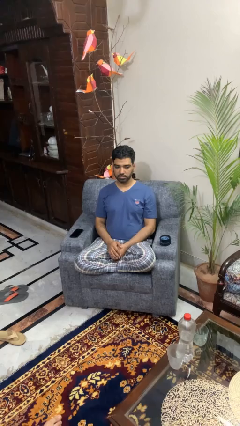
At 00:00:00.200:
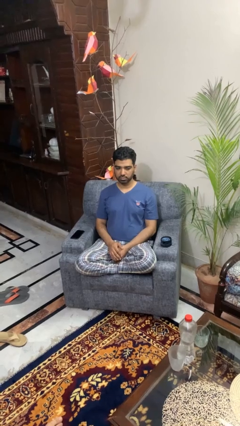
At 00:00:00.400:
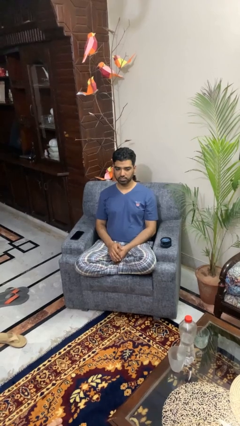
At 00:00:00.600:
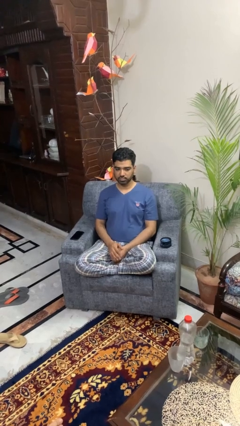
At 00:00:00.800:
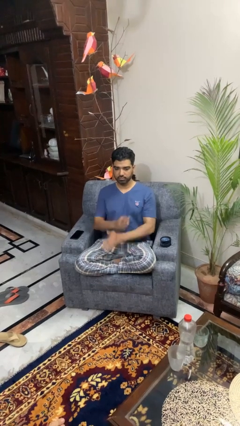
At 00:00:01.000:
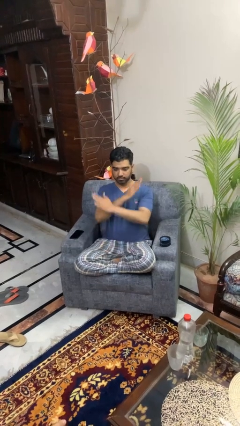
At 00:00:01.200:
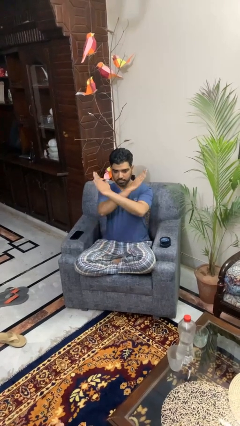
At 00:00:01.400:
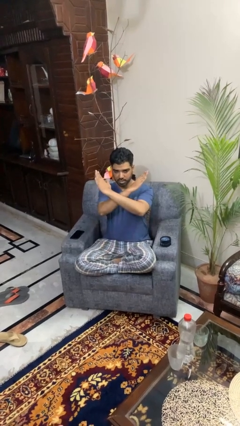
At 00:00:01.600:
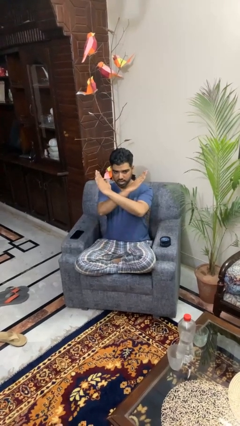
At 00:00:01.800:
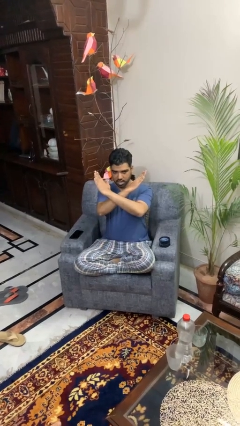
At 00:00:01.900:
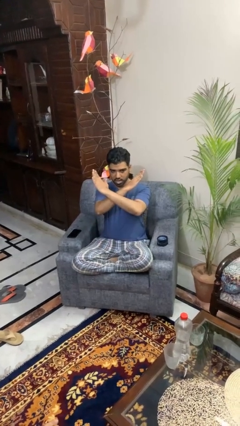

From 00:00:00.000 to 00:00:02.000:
person gestures arms x

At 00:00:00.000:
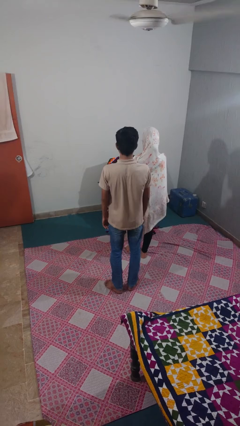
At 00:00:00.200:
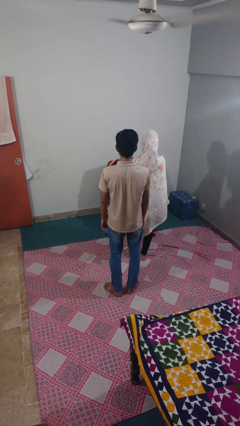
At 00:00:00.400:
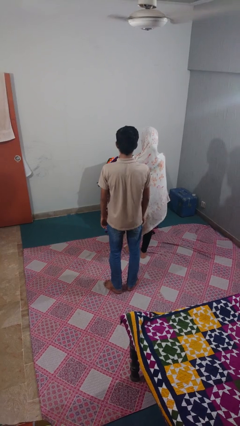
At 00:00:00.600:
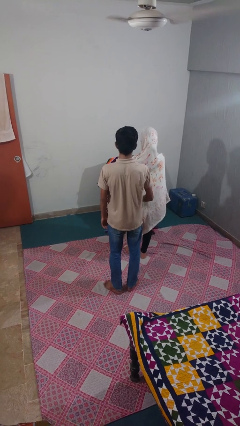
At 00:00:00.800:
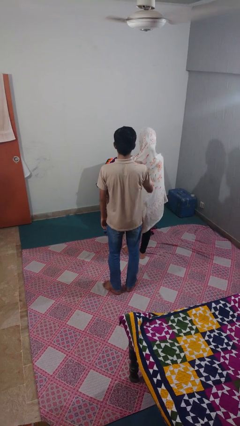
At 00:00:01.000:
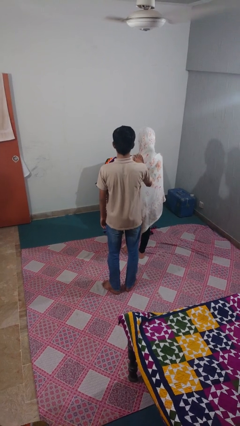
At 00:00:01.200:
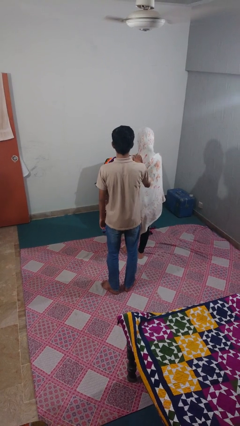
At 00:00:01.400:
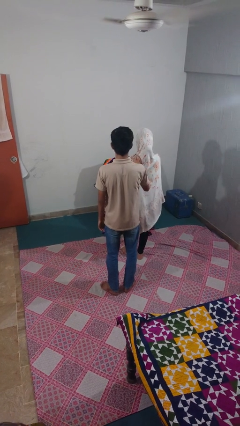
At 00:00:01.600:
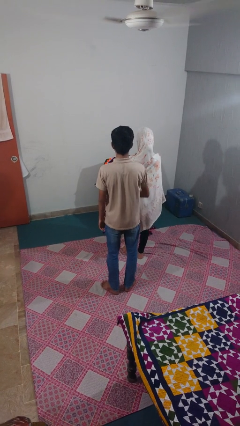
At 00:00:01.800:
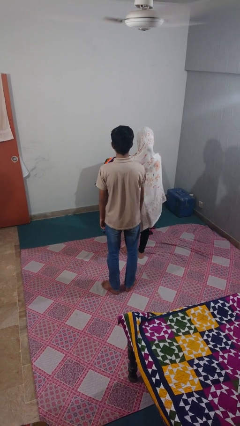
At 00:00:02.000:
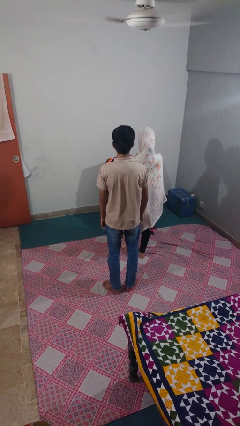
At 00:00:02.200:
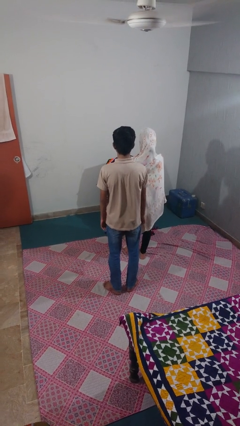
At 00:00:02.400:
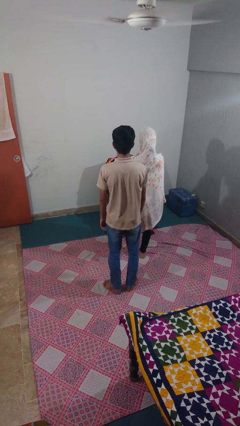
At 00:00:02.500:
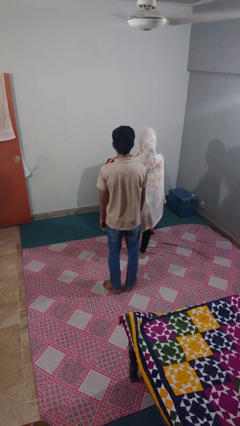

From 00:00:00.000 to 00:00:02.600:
person touches back of person

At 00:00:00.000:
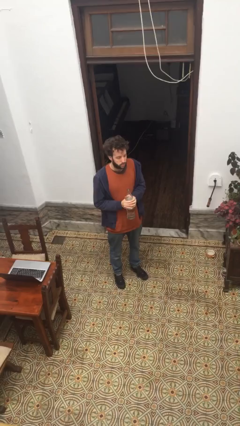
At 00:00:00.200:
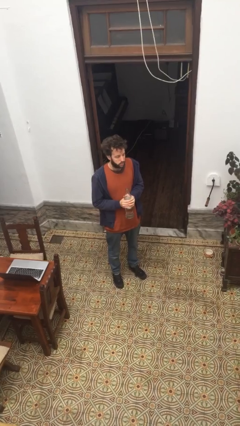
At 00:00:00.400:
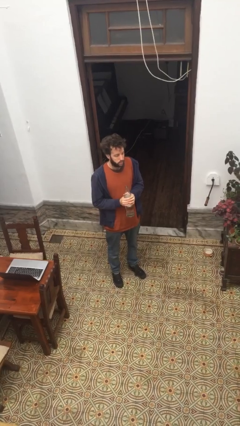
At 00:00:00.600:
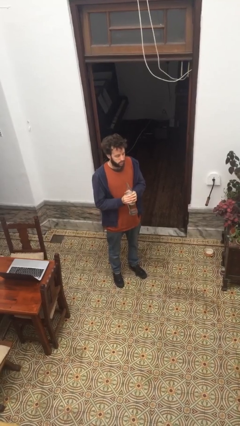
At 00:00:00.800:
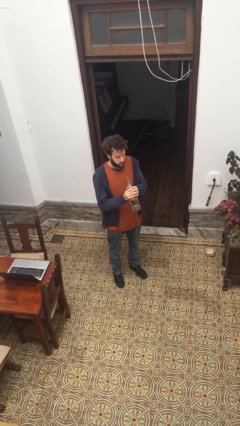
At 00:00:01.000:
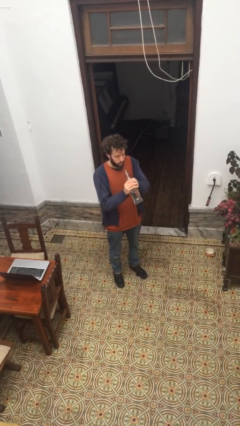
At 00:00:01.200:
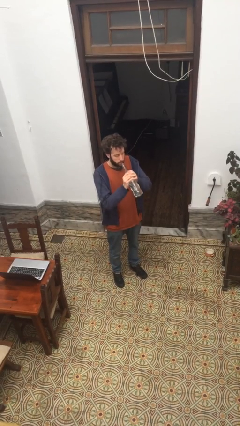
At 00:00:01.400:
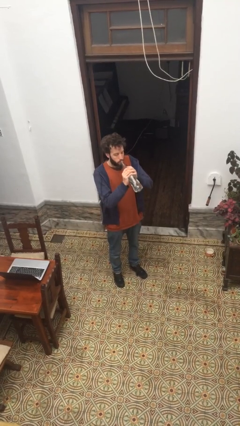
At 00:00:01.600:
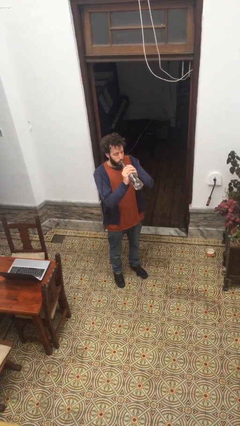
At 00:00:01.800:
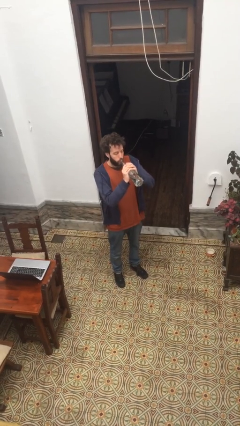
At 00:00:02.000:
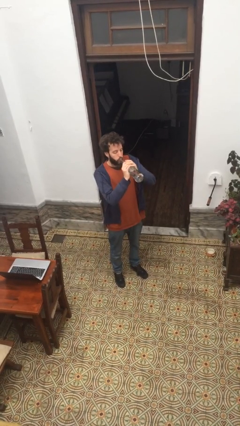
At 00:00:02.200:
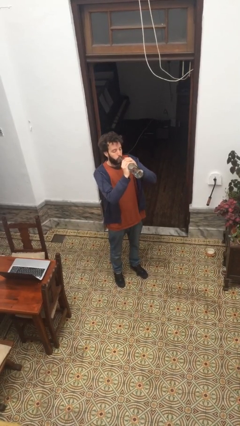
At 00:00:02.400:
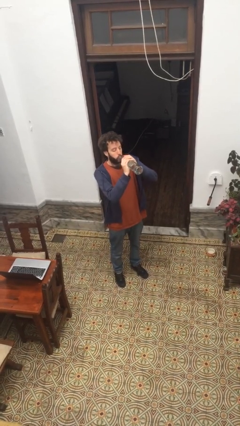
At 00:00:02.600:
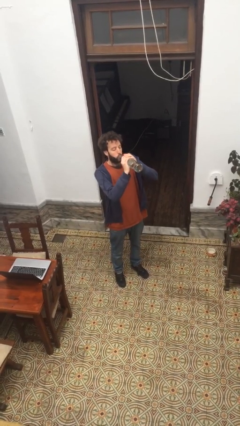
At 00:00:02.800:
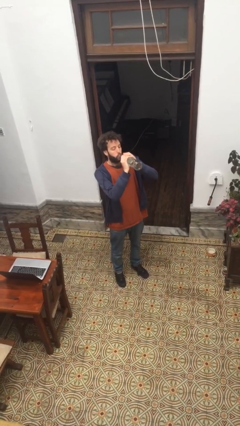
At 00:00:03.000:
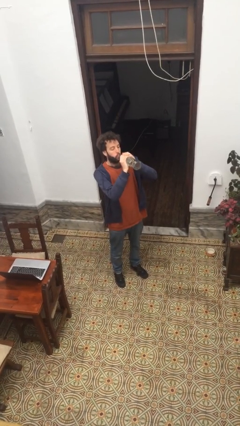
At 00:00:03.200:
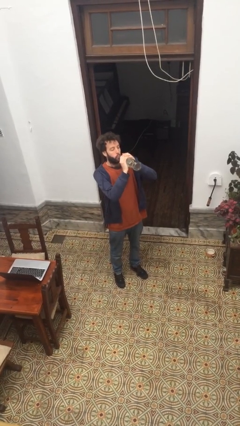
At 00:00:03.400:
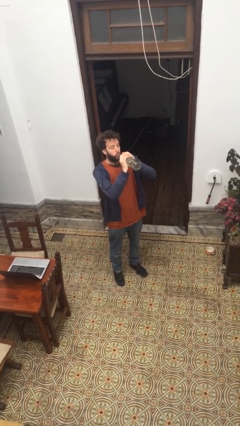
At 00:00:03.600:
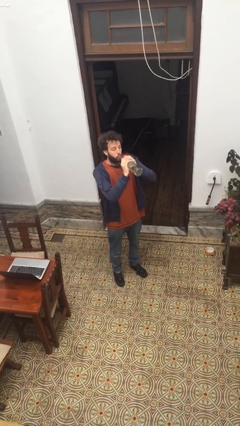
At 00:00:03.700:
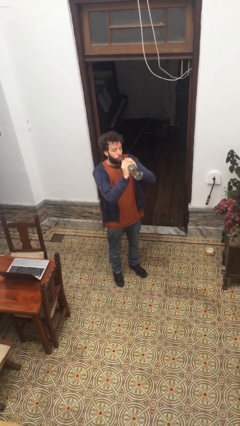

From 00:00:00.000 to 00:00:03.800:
person drinks from bottle

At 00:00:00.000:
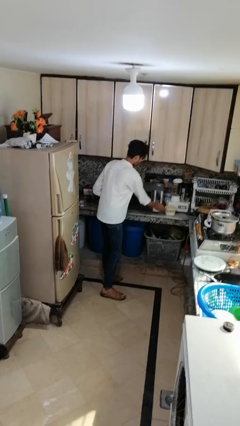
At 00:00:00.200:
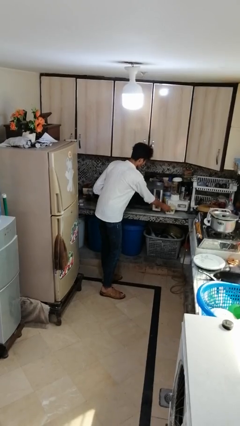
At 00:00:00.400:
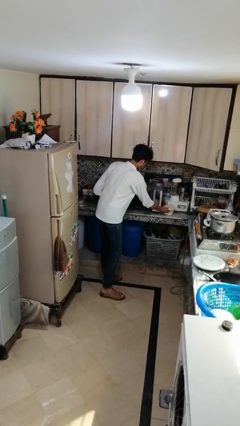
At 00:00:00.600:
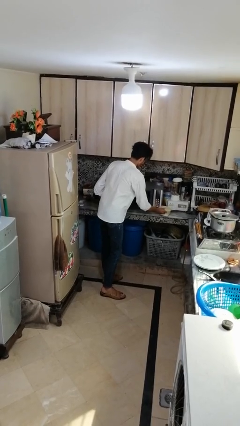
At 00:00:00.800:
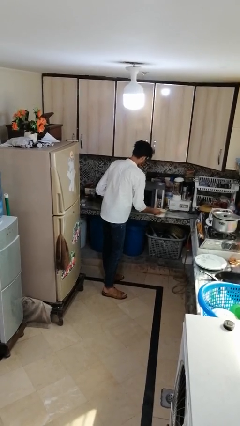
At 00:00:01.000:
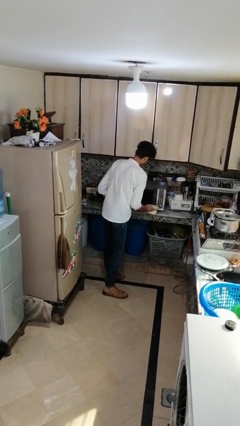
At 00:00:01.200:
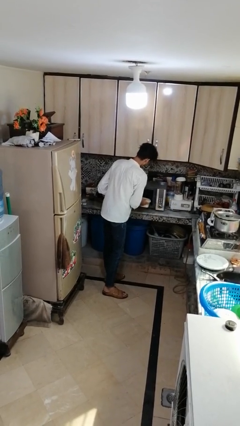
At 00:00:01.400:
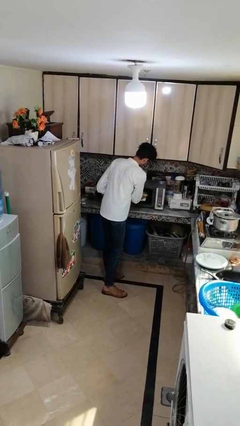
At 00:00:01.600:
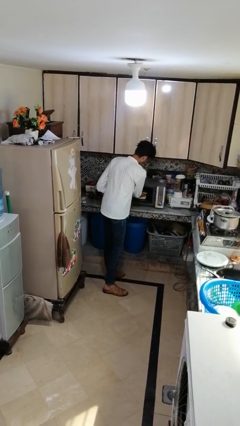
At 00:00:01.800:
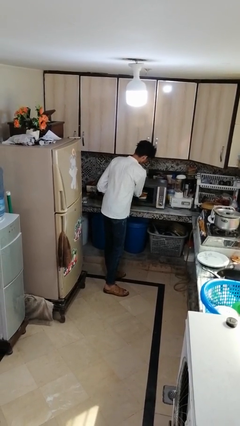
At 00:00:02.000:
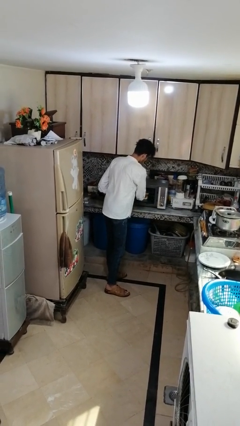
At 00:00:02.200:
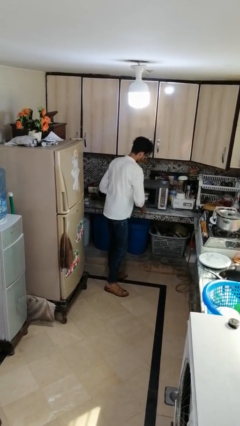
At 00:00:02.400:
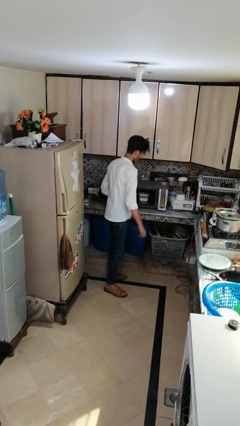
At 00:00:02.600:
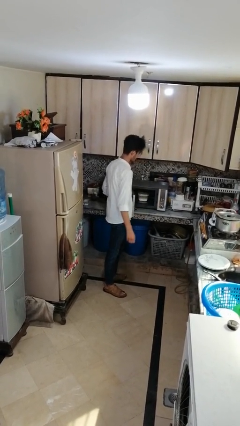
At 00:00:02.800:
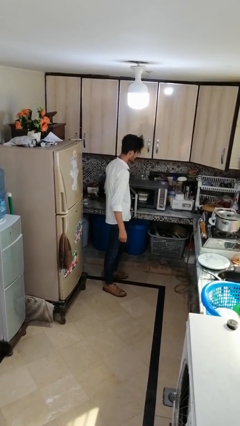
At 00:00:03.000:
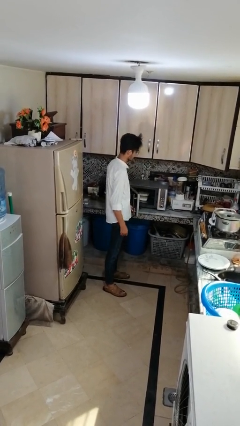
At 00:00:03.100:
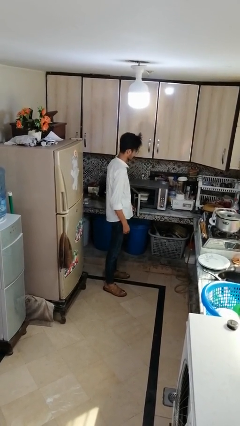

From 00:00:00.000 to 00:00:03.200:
person puts object into microwave

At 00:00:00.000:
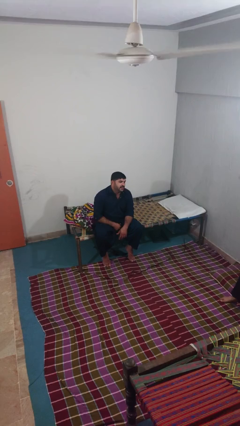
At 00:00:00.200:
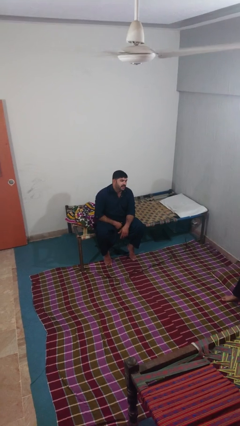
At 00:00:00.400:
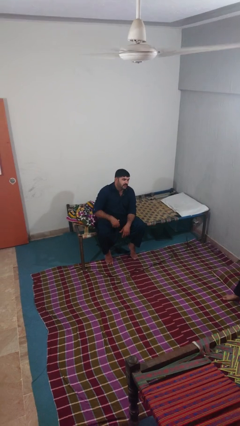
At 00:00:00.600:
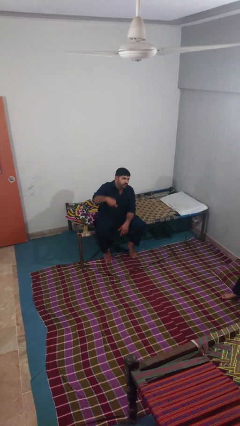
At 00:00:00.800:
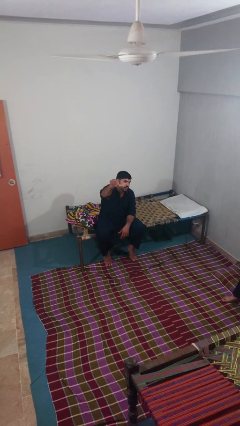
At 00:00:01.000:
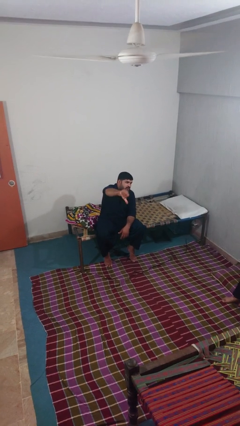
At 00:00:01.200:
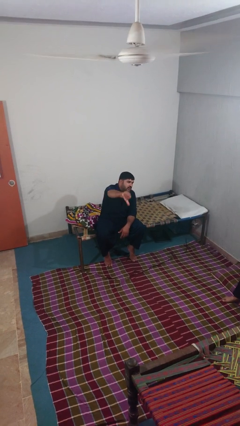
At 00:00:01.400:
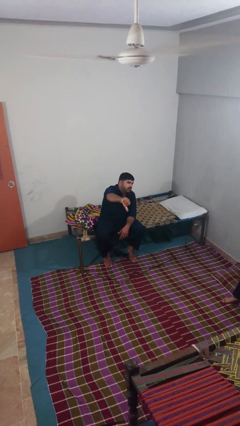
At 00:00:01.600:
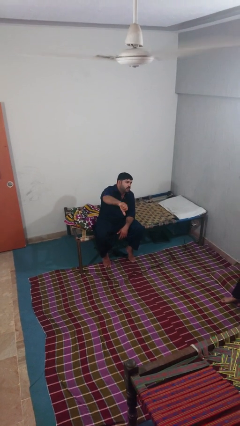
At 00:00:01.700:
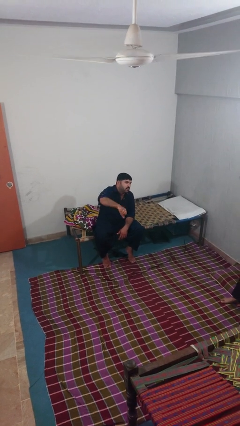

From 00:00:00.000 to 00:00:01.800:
person gestures thumbs down

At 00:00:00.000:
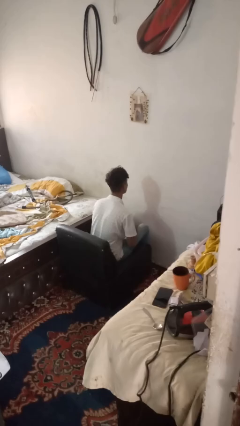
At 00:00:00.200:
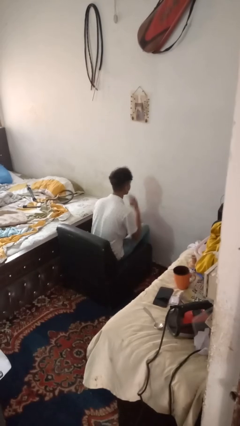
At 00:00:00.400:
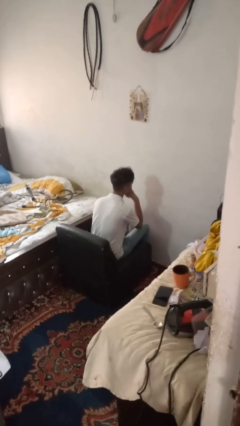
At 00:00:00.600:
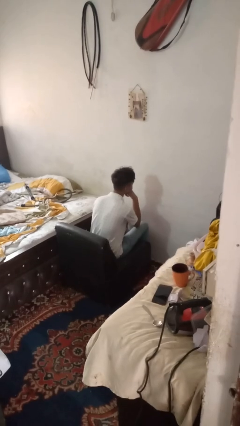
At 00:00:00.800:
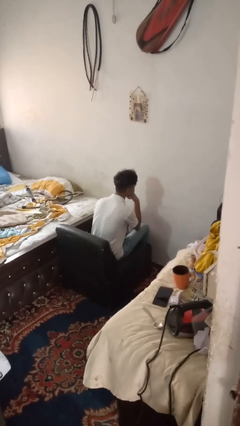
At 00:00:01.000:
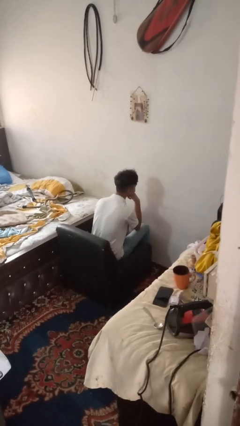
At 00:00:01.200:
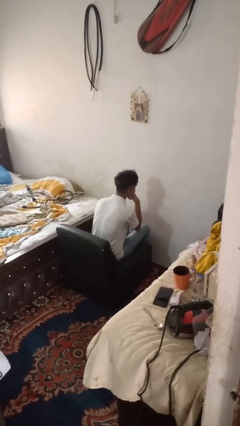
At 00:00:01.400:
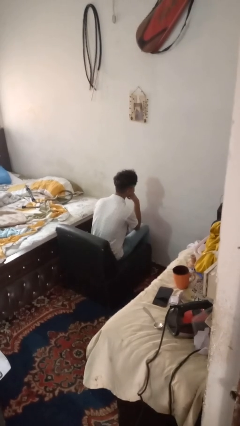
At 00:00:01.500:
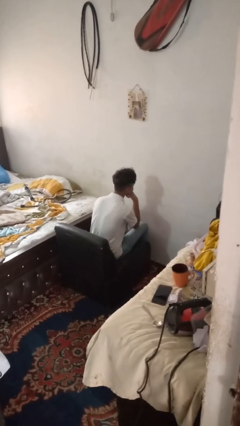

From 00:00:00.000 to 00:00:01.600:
person strokes chin

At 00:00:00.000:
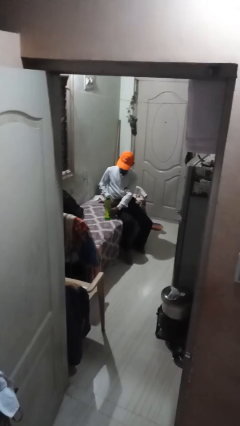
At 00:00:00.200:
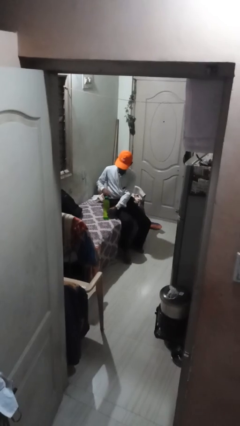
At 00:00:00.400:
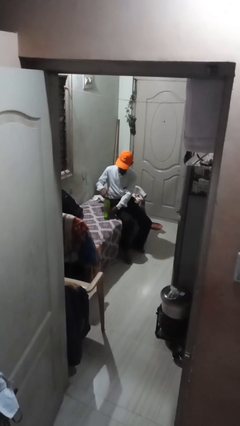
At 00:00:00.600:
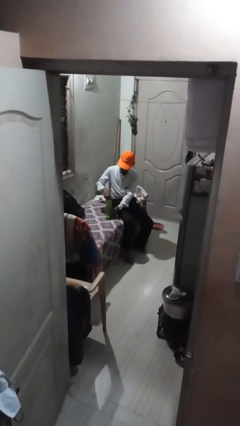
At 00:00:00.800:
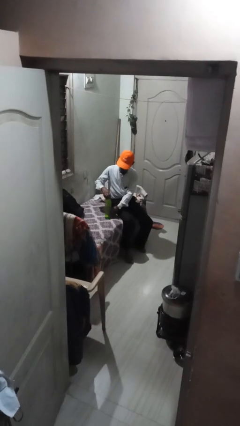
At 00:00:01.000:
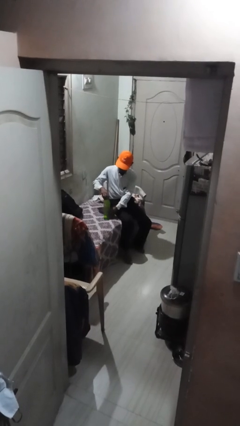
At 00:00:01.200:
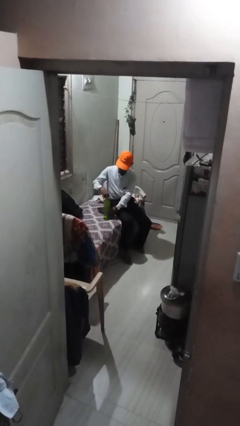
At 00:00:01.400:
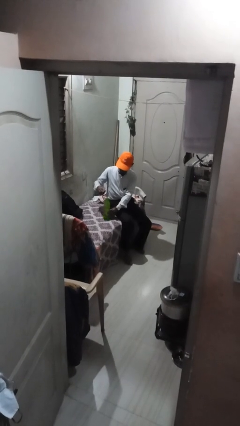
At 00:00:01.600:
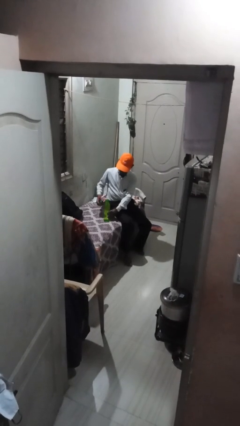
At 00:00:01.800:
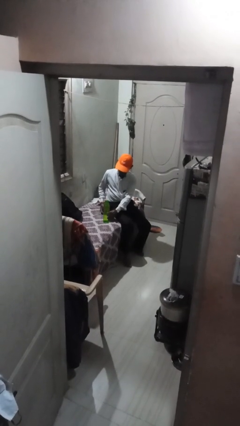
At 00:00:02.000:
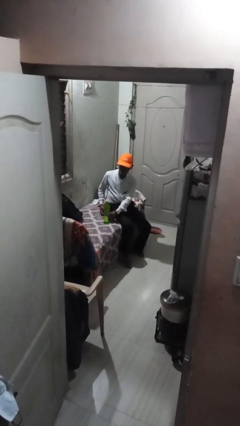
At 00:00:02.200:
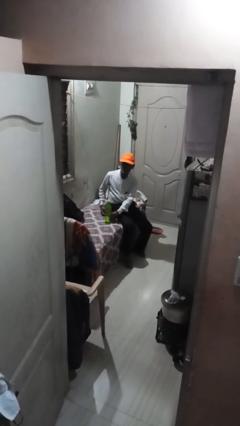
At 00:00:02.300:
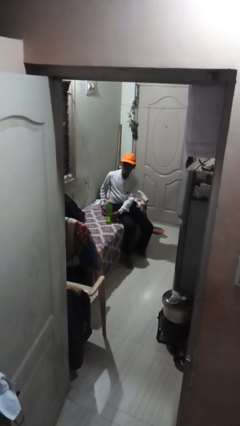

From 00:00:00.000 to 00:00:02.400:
person unscrews lid from bottle
